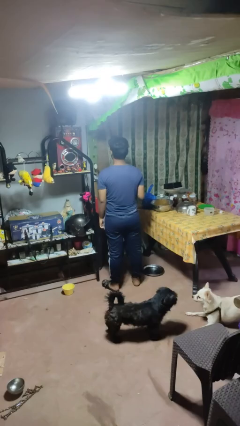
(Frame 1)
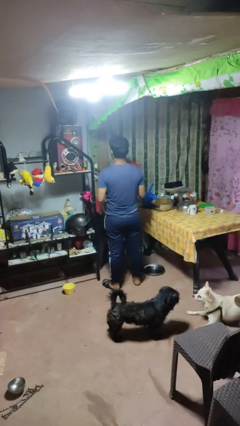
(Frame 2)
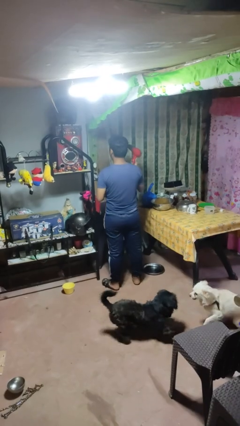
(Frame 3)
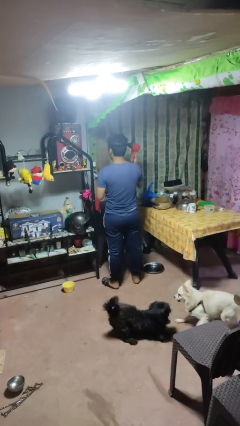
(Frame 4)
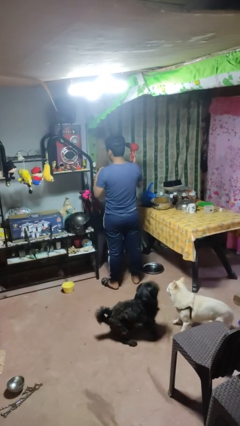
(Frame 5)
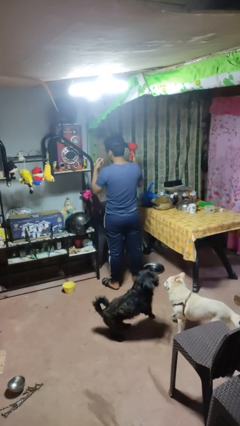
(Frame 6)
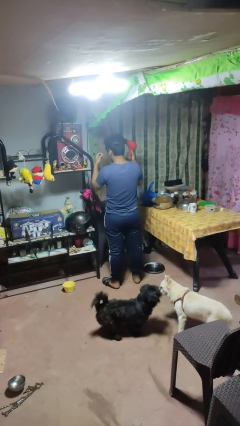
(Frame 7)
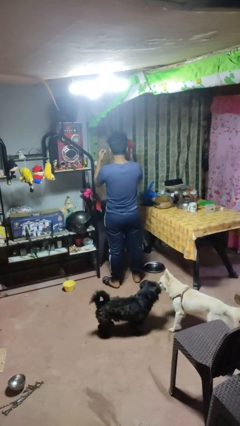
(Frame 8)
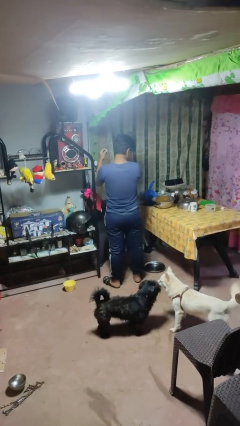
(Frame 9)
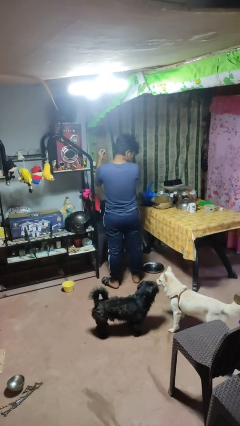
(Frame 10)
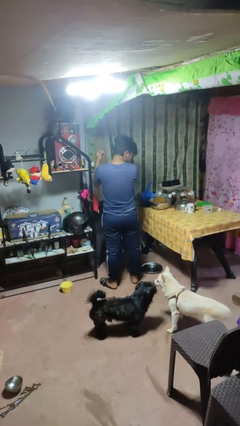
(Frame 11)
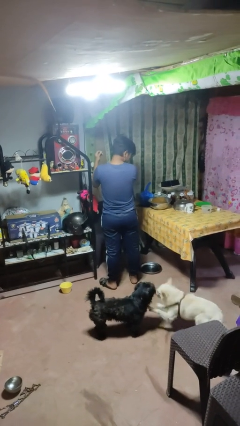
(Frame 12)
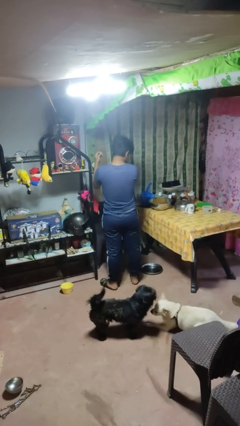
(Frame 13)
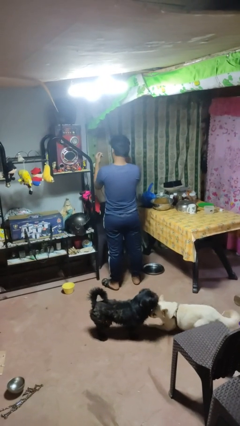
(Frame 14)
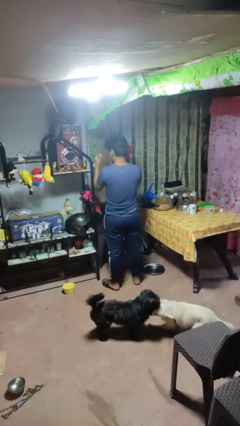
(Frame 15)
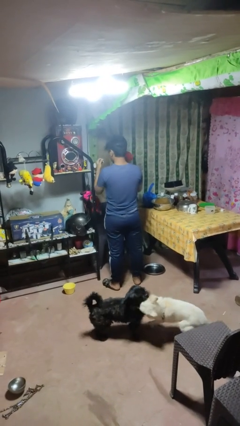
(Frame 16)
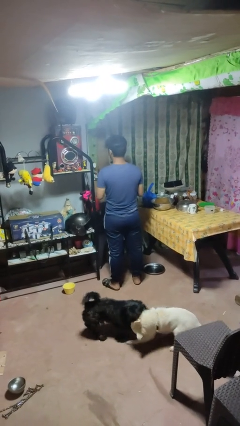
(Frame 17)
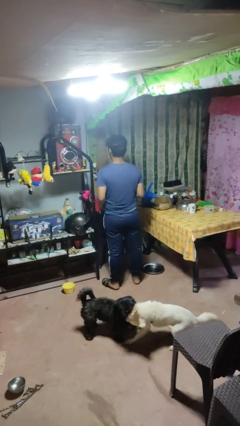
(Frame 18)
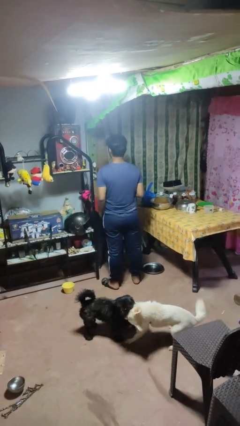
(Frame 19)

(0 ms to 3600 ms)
person dries hair with hairdryer

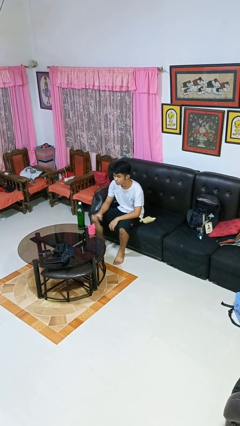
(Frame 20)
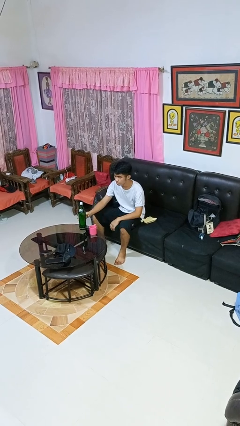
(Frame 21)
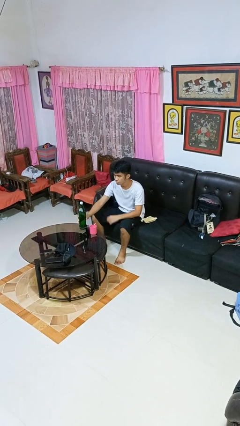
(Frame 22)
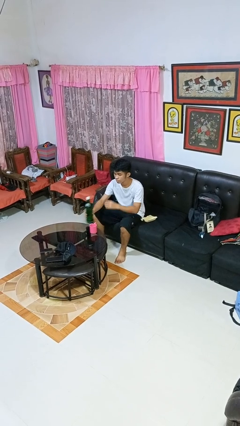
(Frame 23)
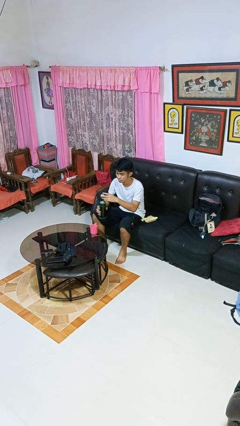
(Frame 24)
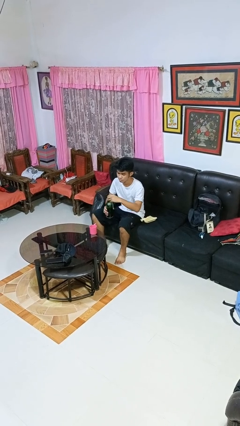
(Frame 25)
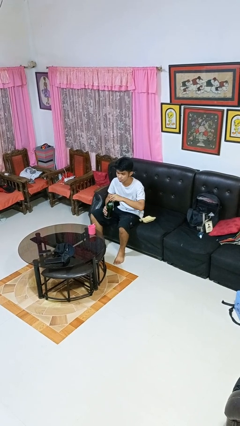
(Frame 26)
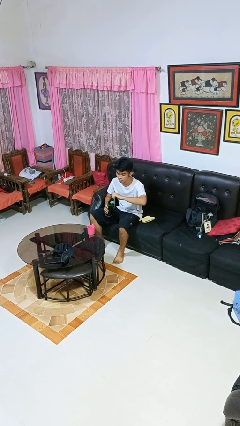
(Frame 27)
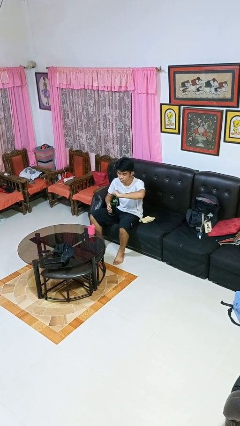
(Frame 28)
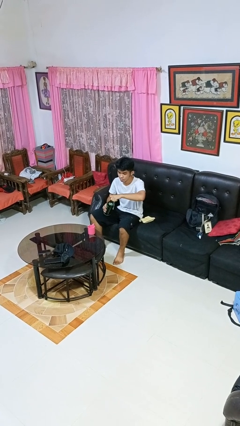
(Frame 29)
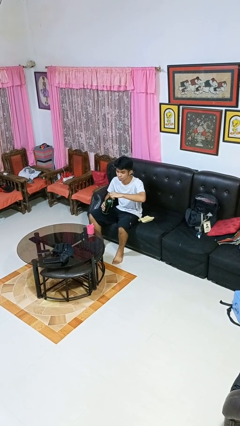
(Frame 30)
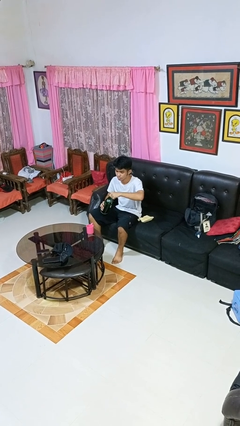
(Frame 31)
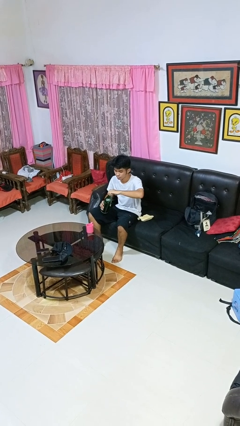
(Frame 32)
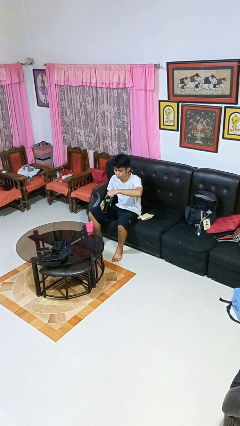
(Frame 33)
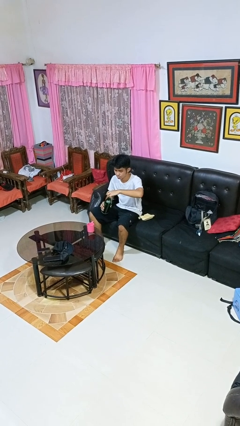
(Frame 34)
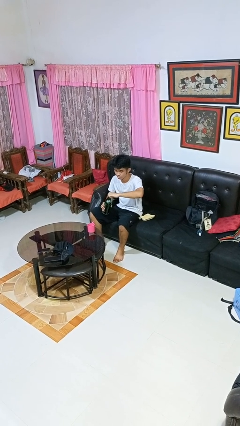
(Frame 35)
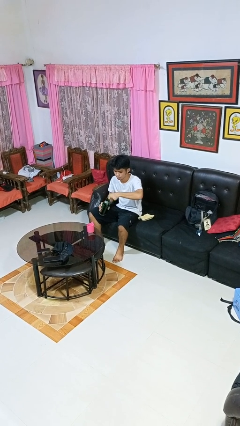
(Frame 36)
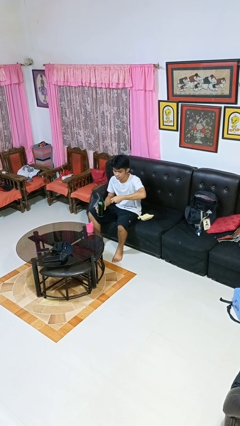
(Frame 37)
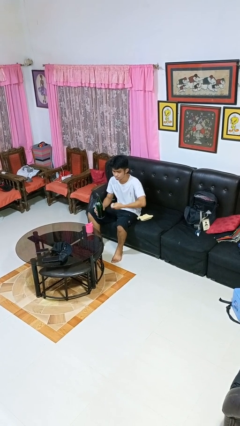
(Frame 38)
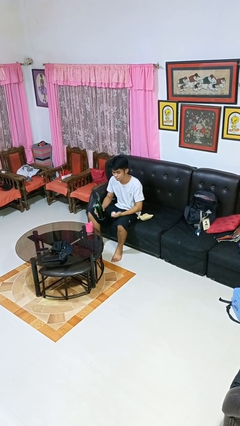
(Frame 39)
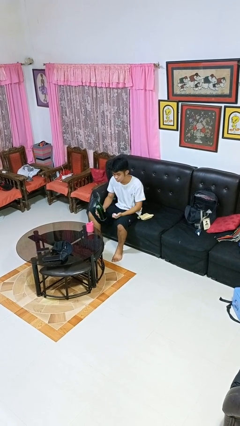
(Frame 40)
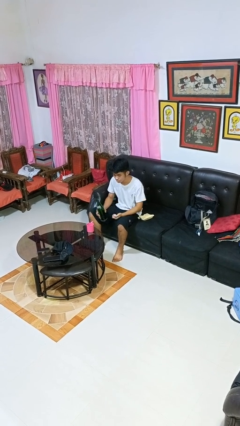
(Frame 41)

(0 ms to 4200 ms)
person unscrews lid from bottle

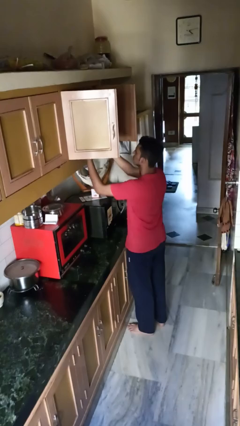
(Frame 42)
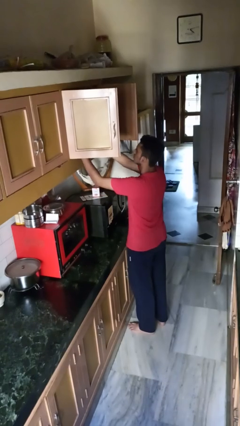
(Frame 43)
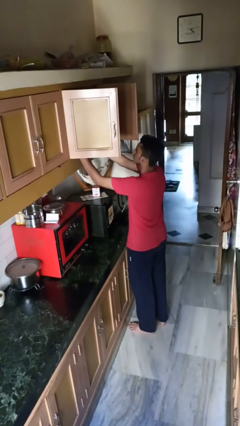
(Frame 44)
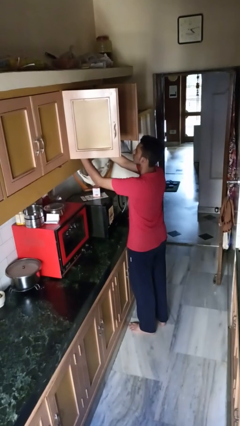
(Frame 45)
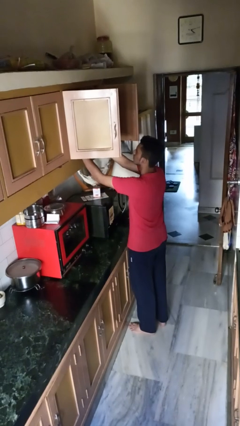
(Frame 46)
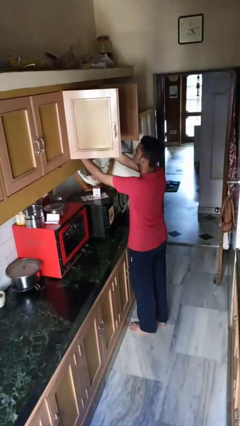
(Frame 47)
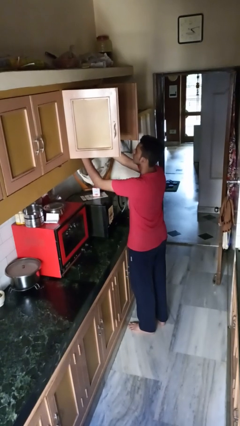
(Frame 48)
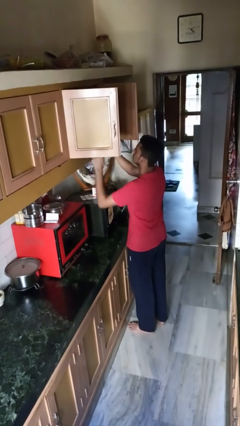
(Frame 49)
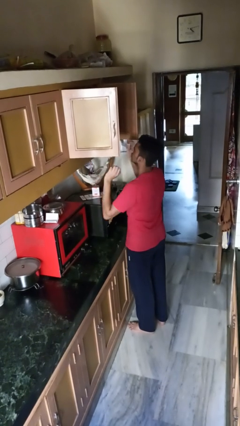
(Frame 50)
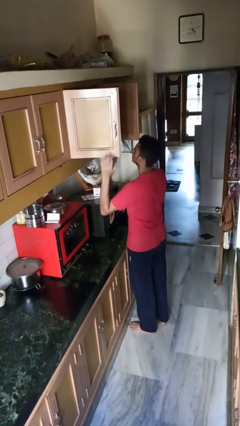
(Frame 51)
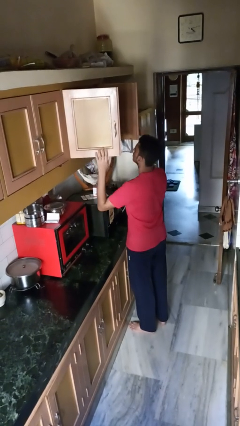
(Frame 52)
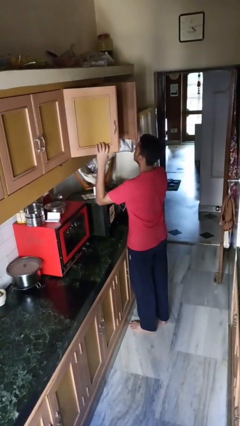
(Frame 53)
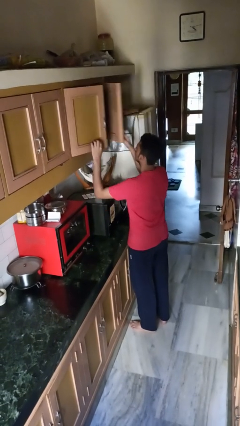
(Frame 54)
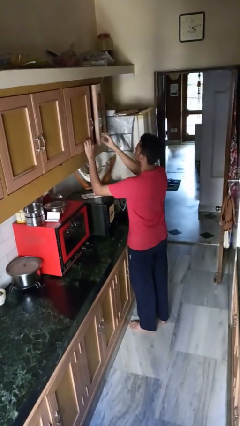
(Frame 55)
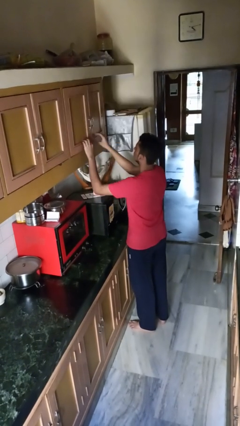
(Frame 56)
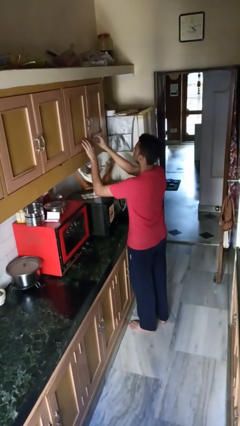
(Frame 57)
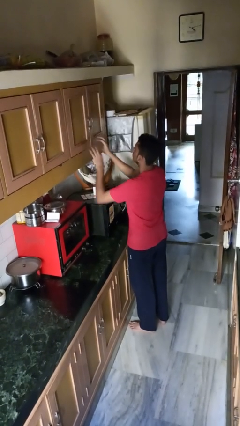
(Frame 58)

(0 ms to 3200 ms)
person puts object in cabinet

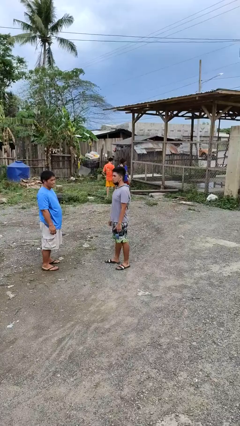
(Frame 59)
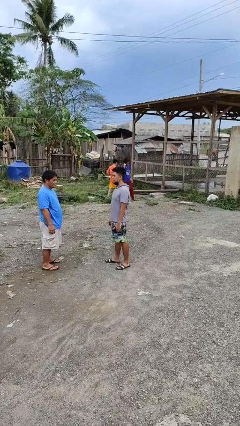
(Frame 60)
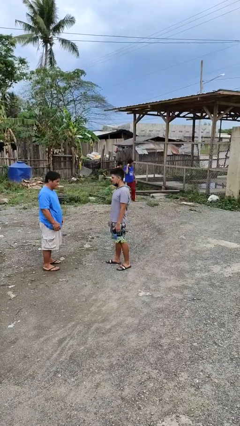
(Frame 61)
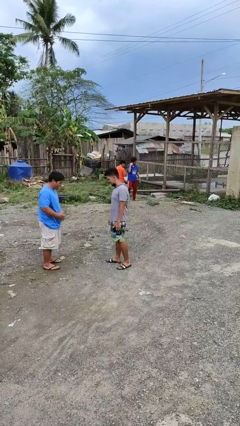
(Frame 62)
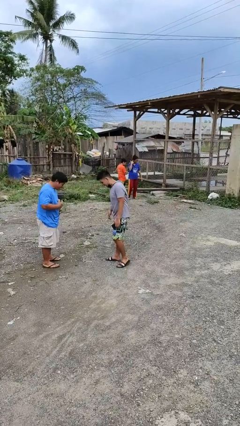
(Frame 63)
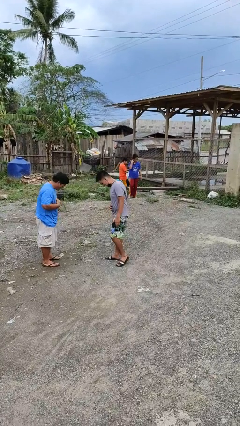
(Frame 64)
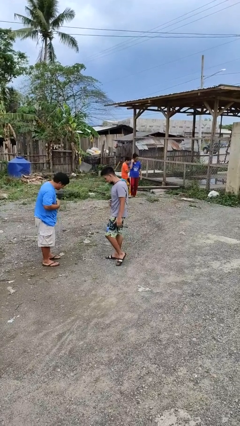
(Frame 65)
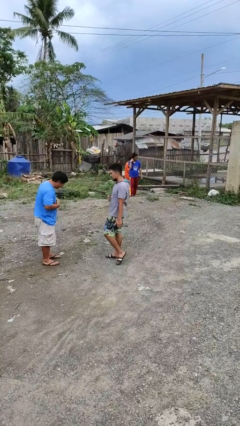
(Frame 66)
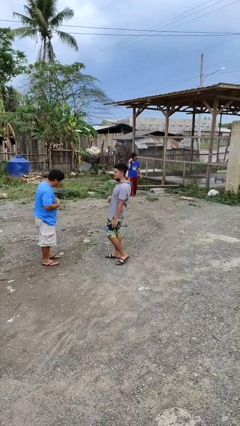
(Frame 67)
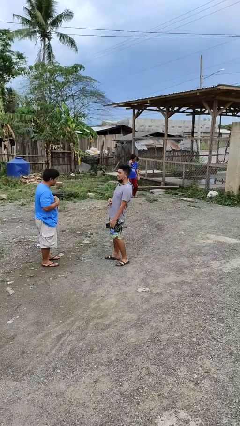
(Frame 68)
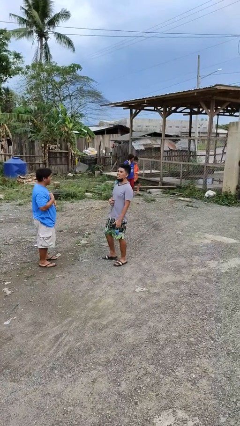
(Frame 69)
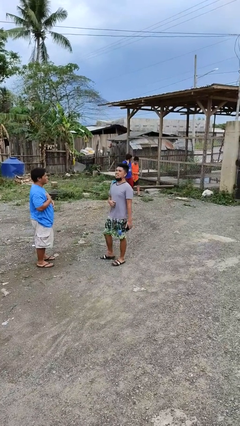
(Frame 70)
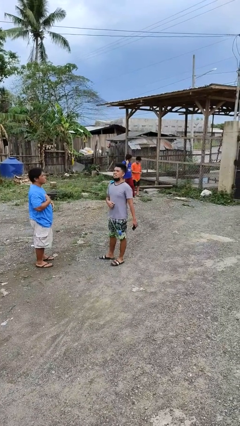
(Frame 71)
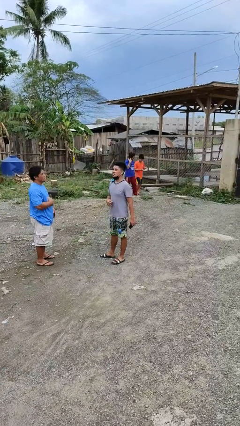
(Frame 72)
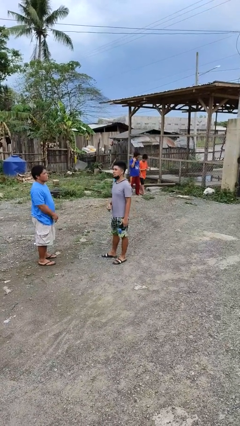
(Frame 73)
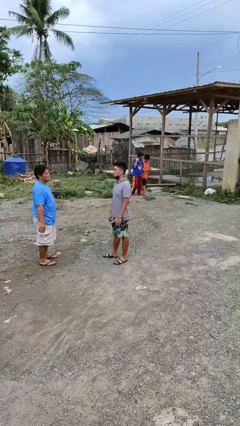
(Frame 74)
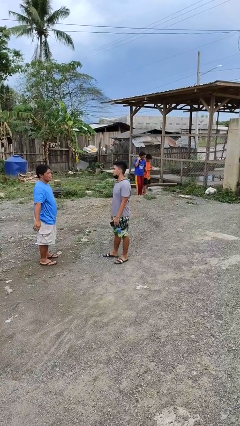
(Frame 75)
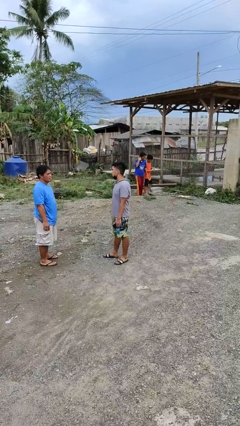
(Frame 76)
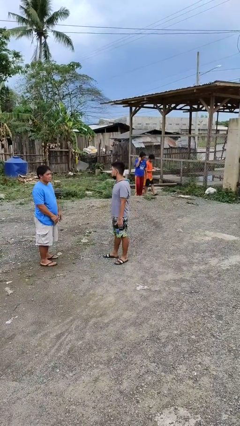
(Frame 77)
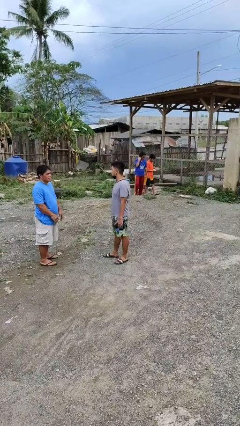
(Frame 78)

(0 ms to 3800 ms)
person laughs with person

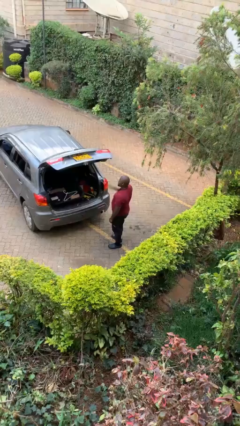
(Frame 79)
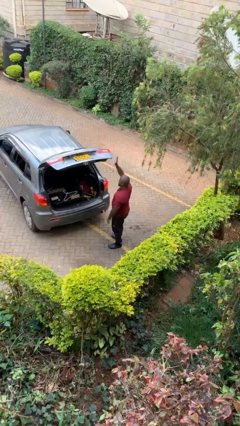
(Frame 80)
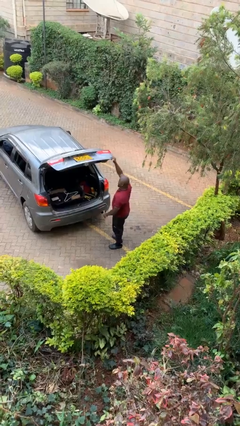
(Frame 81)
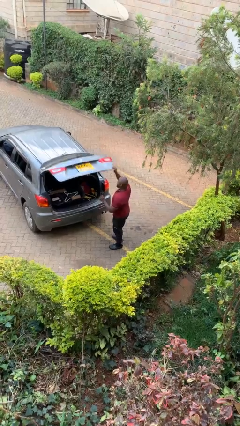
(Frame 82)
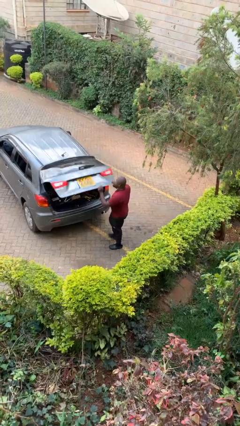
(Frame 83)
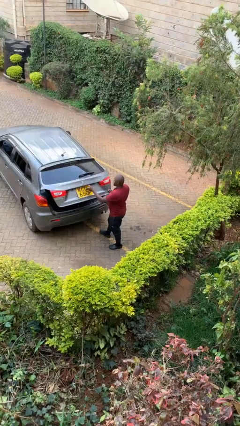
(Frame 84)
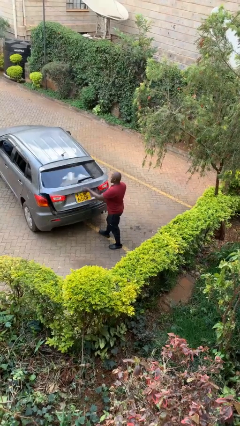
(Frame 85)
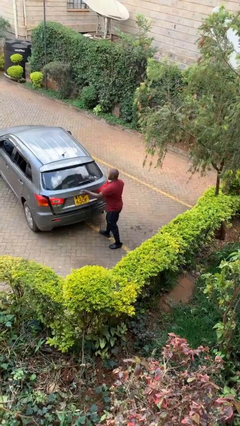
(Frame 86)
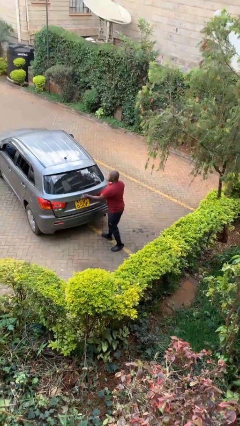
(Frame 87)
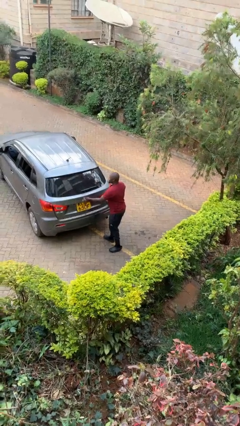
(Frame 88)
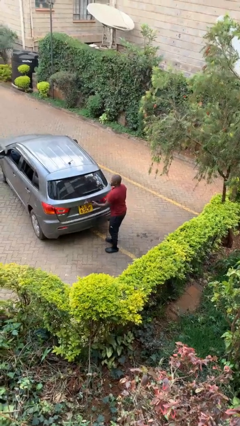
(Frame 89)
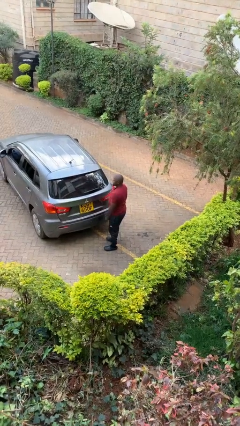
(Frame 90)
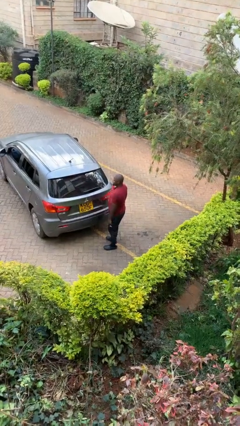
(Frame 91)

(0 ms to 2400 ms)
person closes car trunk

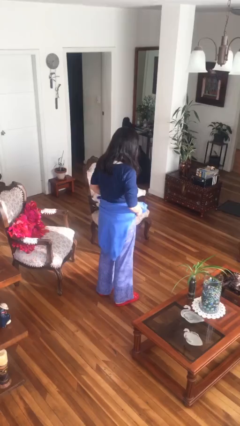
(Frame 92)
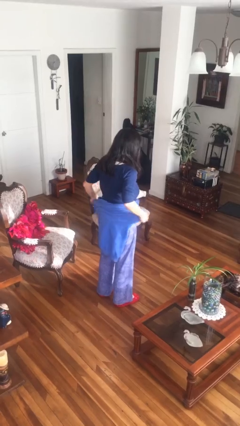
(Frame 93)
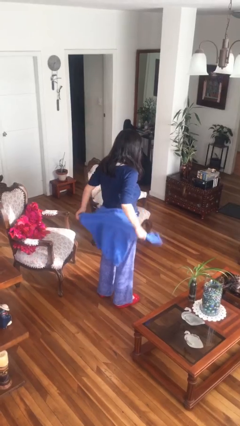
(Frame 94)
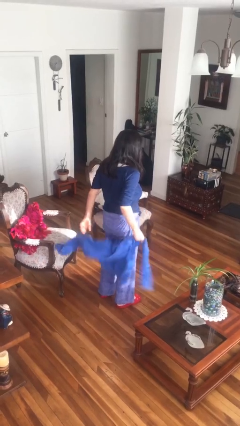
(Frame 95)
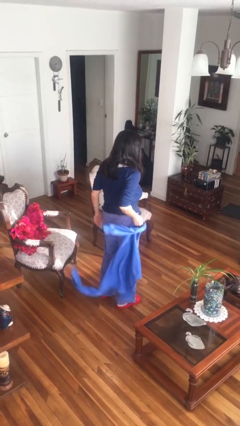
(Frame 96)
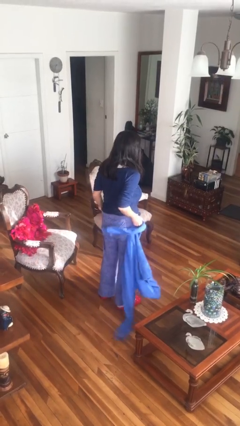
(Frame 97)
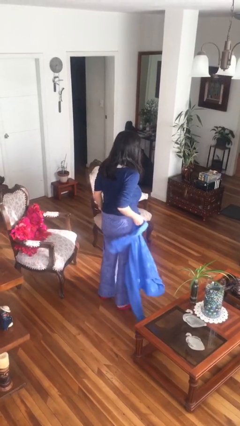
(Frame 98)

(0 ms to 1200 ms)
person unties jacket around waist
